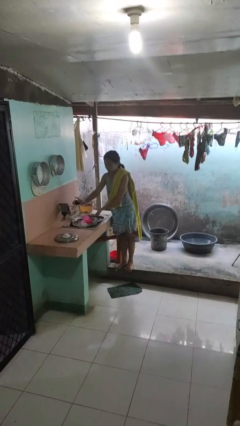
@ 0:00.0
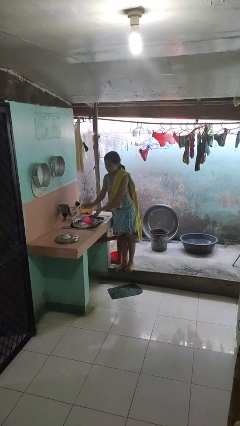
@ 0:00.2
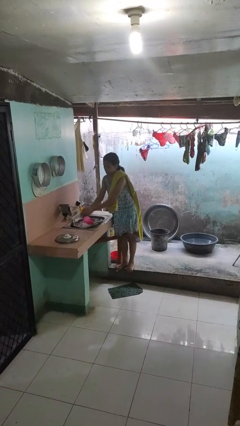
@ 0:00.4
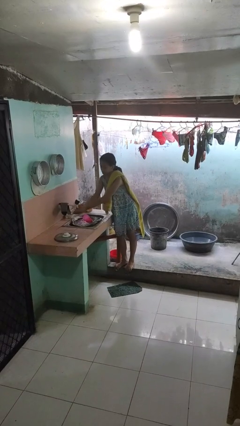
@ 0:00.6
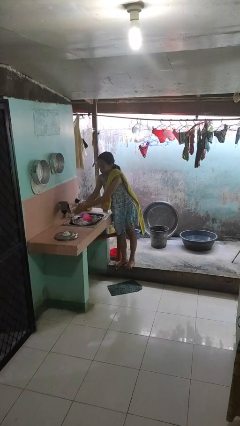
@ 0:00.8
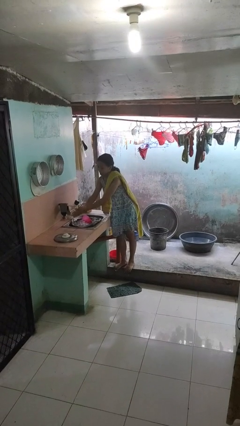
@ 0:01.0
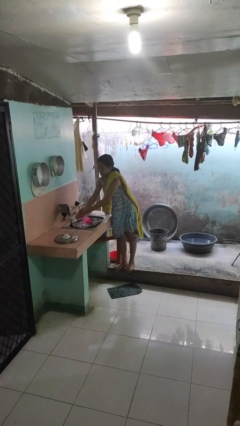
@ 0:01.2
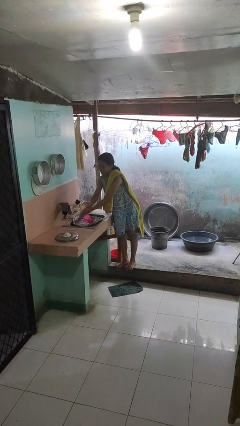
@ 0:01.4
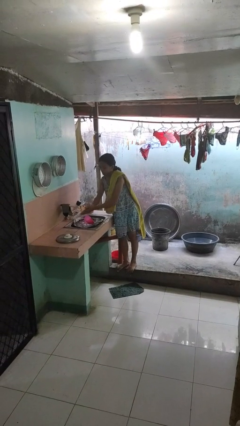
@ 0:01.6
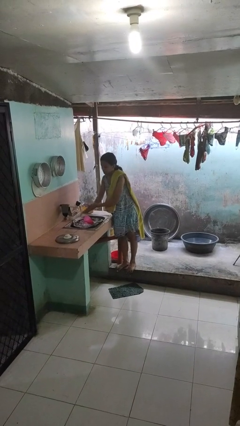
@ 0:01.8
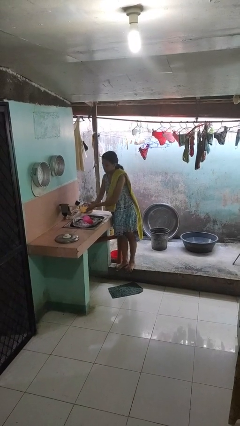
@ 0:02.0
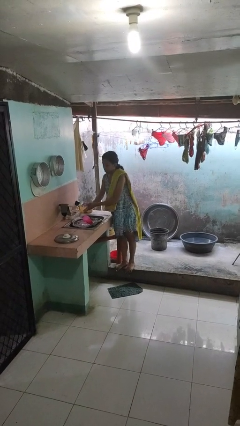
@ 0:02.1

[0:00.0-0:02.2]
person washes hands

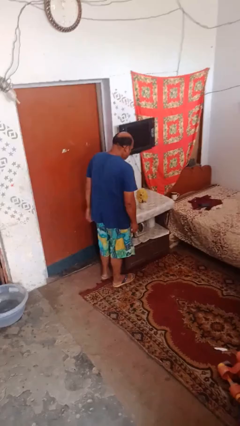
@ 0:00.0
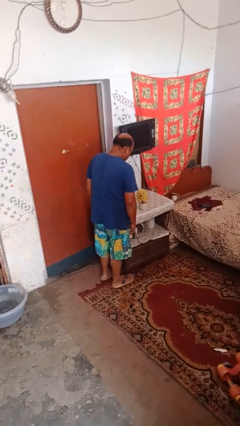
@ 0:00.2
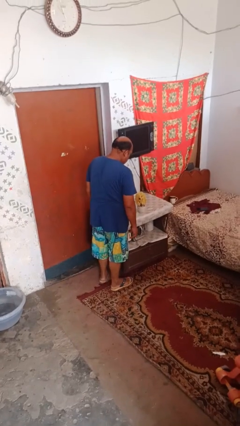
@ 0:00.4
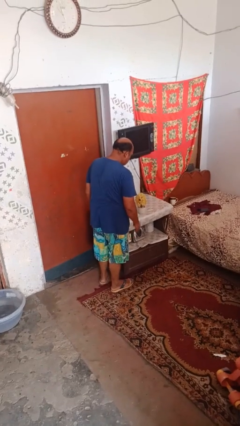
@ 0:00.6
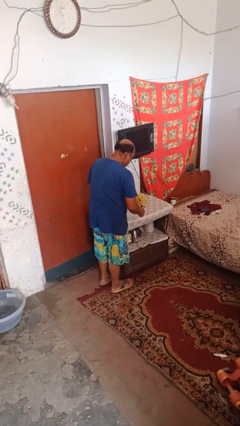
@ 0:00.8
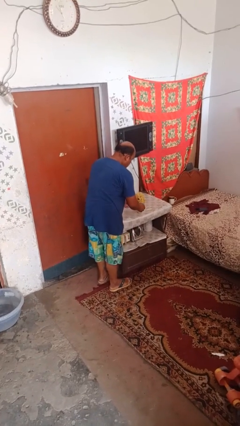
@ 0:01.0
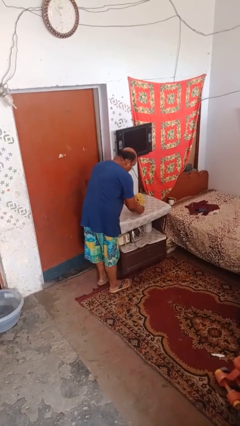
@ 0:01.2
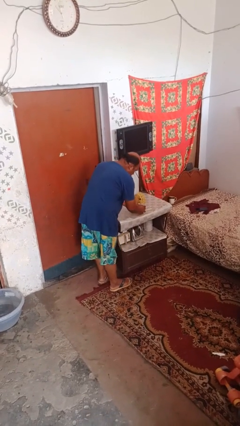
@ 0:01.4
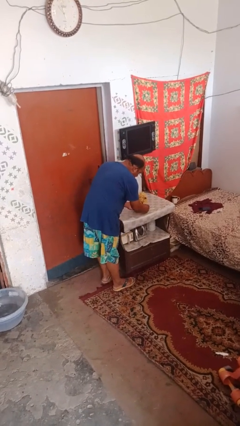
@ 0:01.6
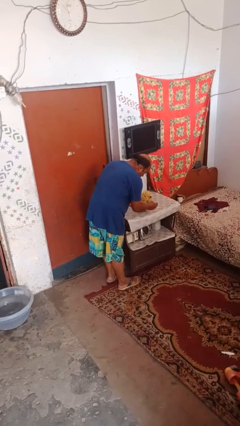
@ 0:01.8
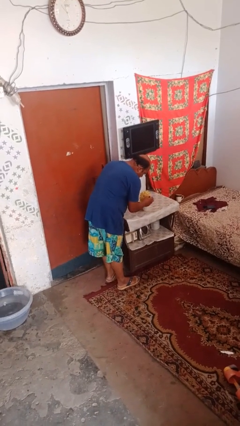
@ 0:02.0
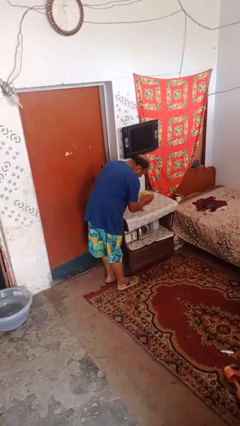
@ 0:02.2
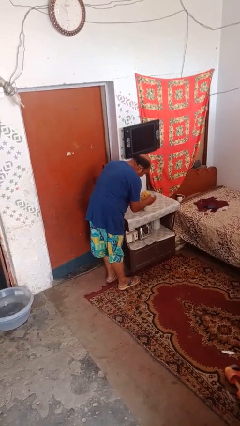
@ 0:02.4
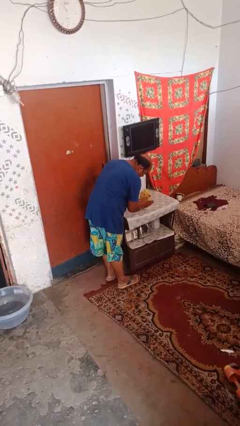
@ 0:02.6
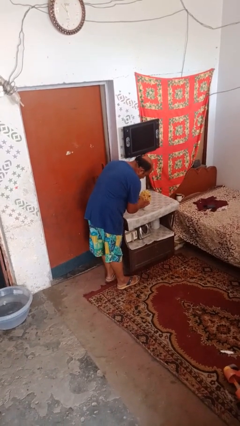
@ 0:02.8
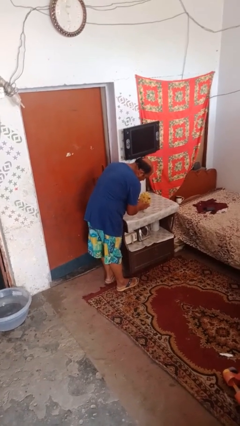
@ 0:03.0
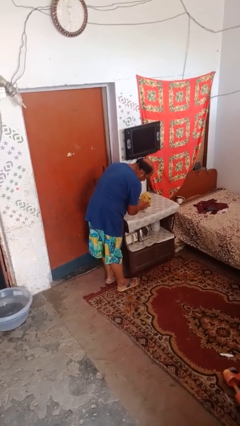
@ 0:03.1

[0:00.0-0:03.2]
person arranges flowers in vase

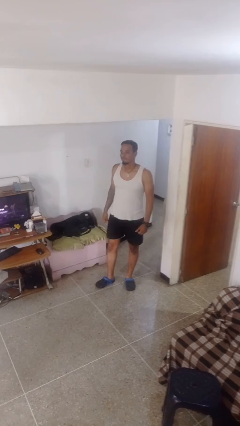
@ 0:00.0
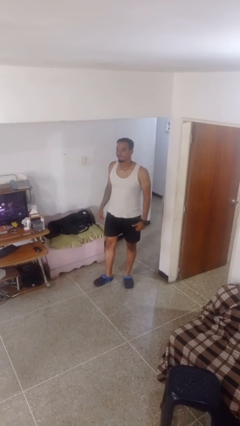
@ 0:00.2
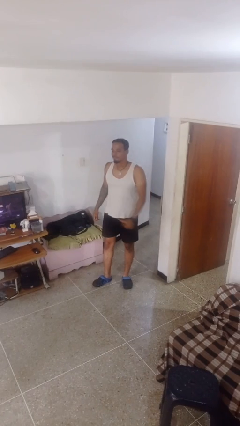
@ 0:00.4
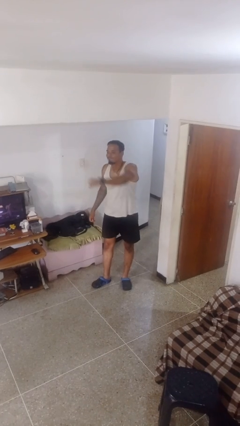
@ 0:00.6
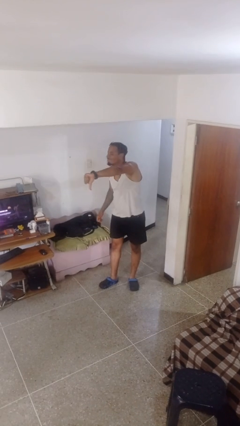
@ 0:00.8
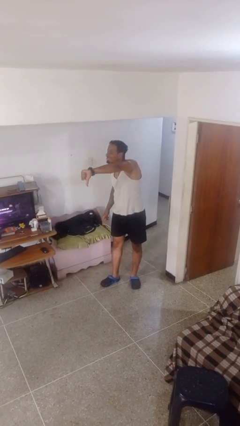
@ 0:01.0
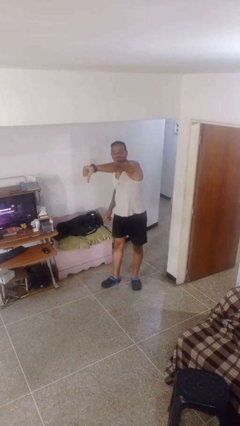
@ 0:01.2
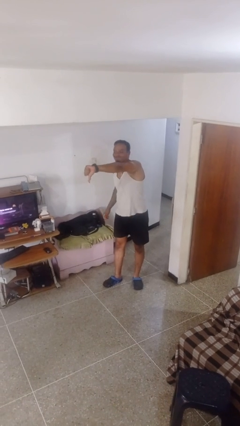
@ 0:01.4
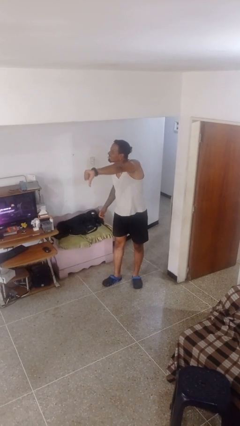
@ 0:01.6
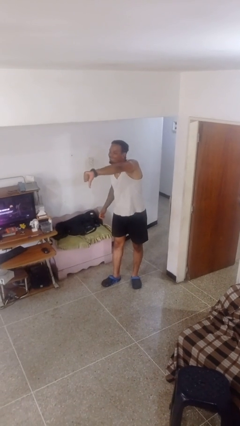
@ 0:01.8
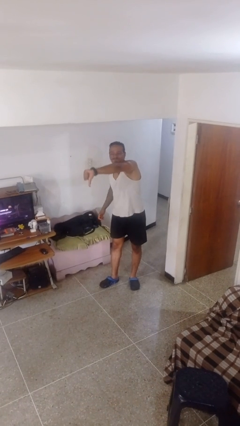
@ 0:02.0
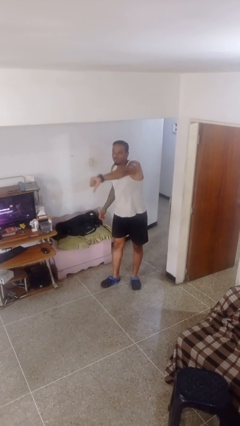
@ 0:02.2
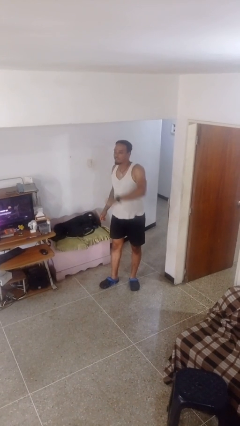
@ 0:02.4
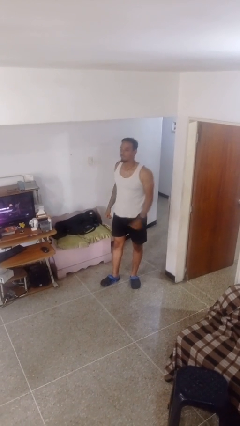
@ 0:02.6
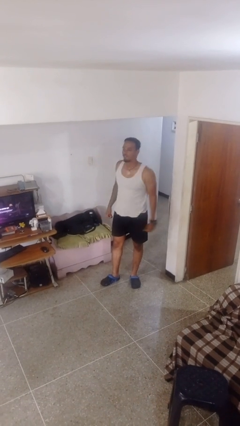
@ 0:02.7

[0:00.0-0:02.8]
person gestures thumbs down

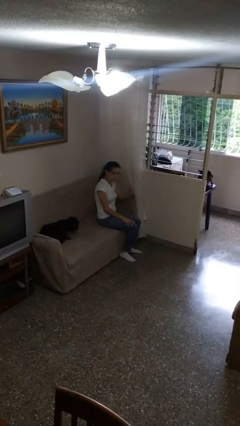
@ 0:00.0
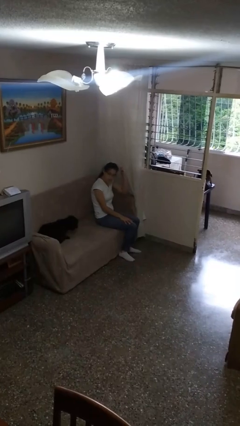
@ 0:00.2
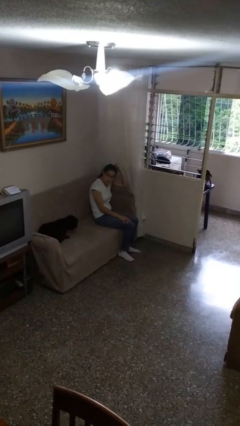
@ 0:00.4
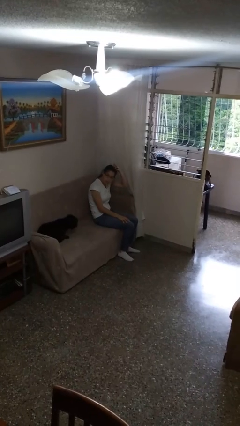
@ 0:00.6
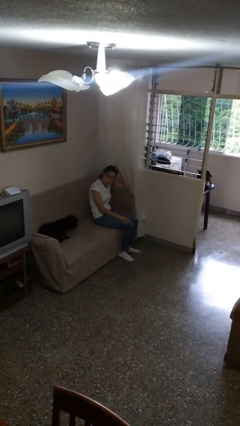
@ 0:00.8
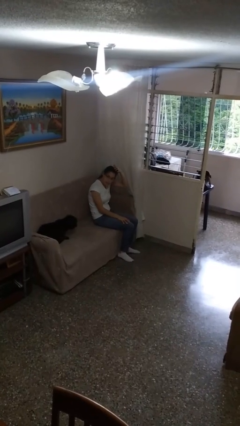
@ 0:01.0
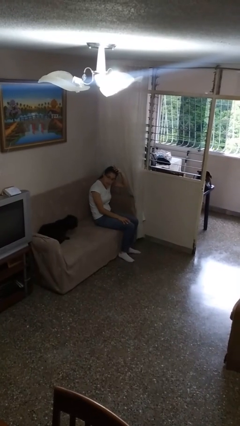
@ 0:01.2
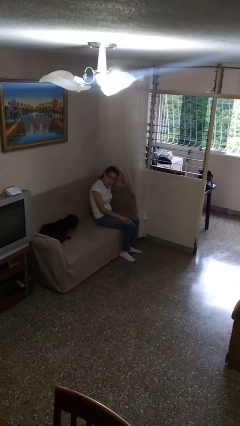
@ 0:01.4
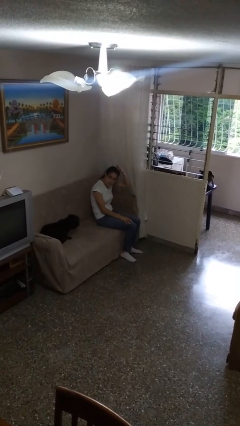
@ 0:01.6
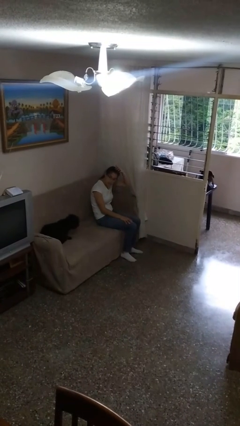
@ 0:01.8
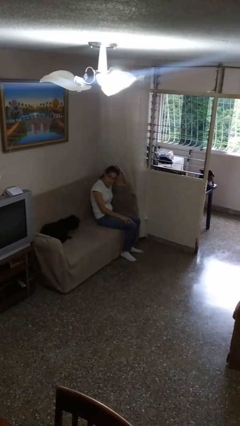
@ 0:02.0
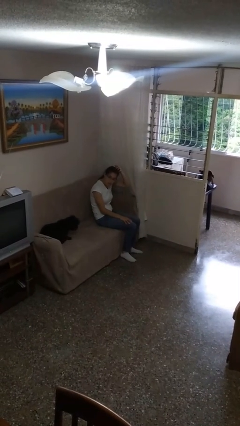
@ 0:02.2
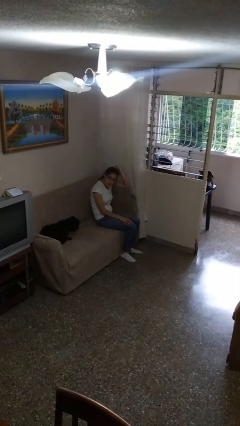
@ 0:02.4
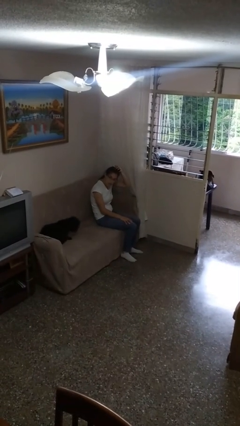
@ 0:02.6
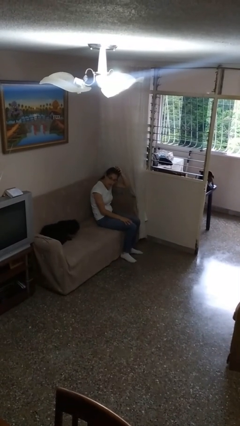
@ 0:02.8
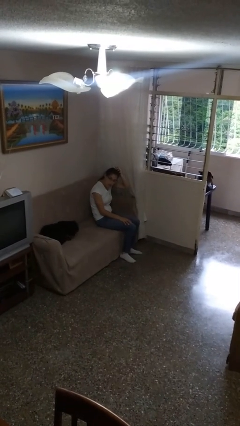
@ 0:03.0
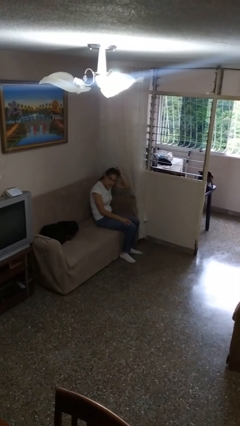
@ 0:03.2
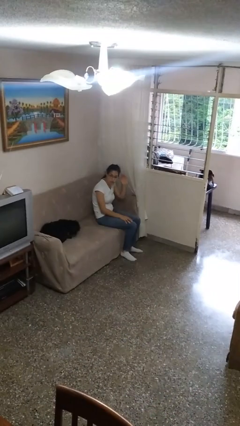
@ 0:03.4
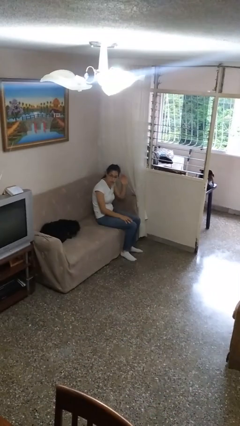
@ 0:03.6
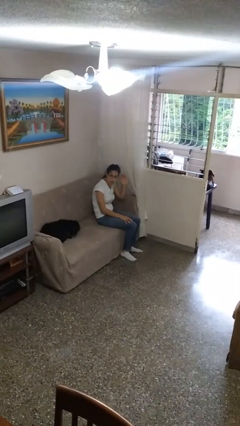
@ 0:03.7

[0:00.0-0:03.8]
person scratches face

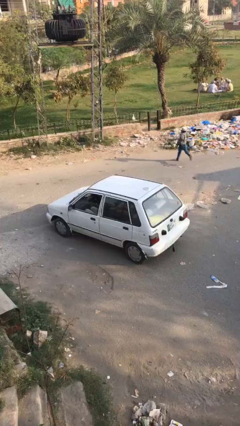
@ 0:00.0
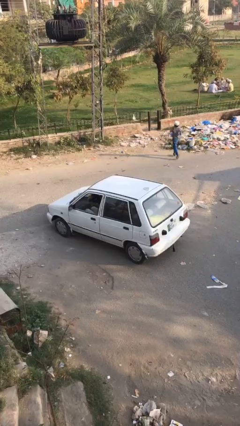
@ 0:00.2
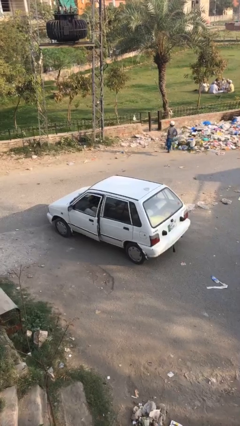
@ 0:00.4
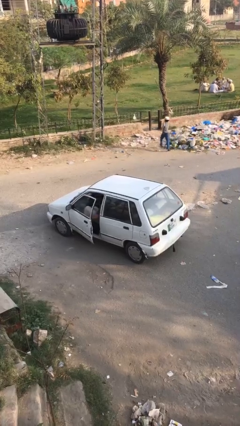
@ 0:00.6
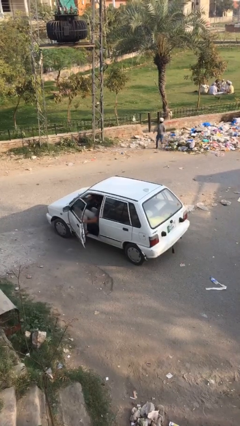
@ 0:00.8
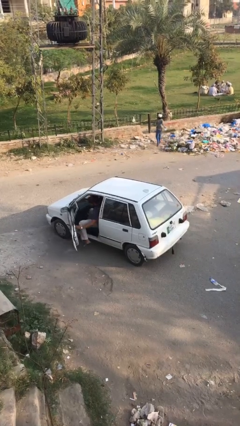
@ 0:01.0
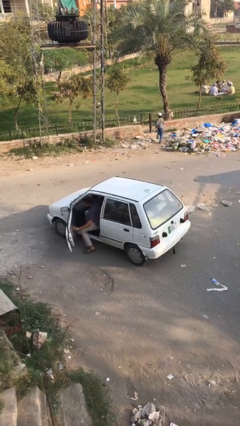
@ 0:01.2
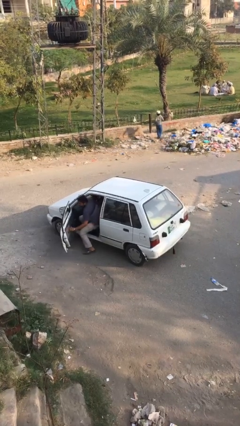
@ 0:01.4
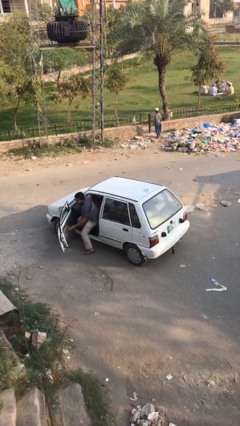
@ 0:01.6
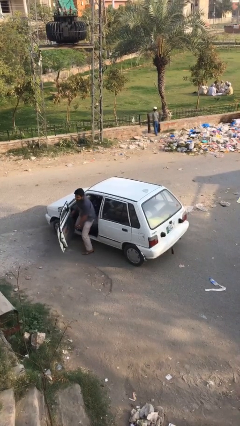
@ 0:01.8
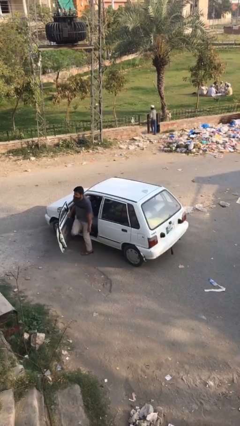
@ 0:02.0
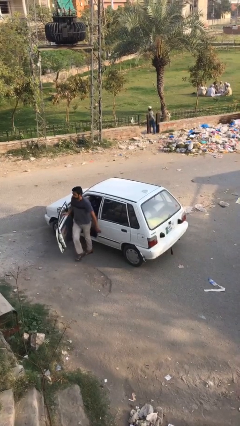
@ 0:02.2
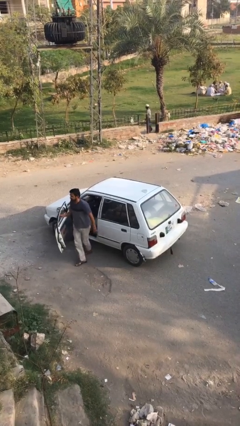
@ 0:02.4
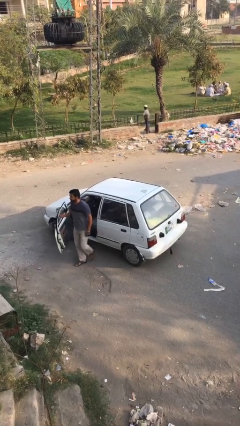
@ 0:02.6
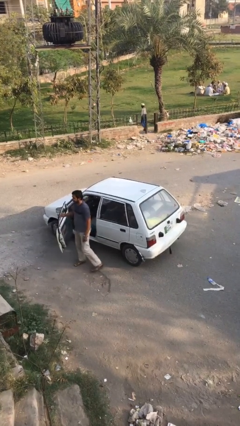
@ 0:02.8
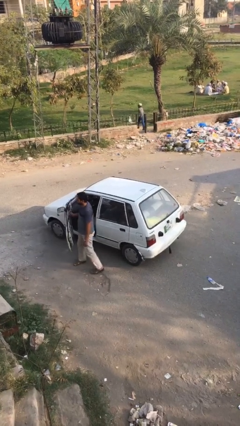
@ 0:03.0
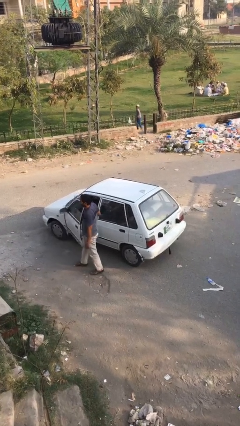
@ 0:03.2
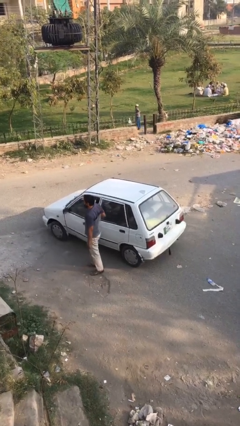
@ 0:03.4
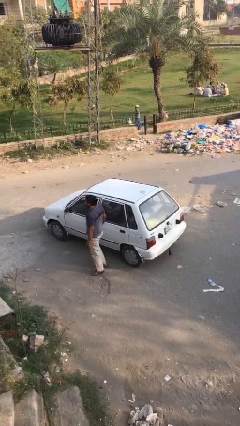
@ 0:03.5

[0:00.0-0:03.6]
car drops off person

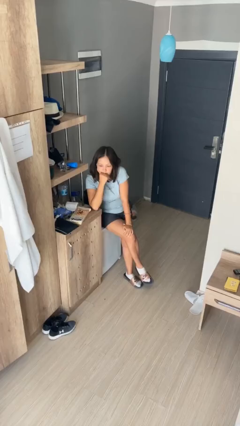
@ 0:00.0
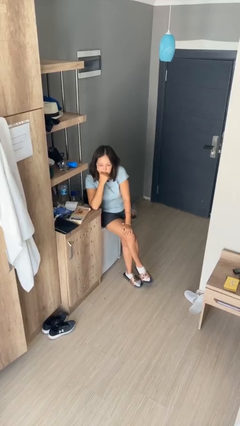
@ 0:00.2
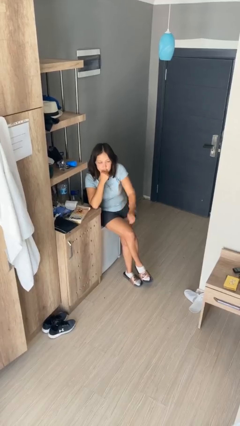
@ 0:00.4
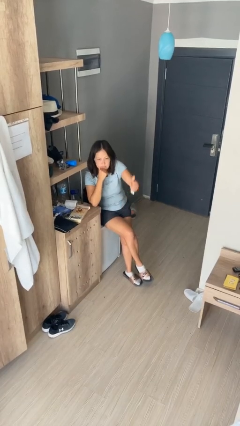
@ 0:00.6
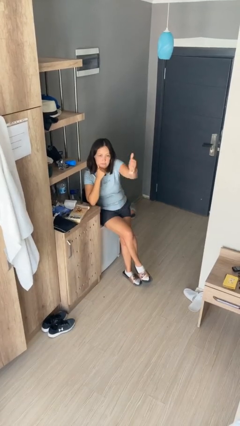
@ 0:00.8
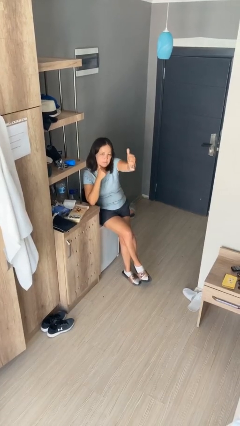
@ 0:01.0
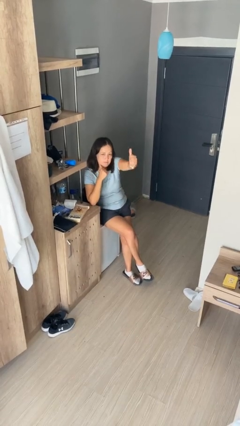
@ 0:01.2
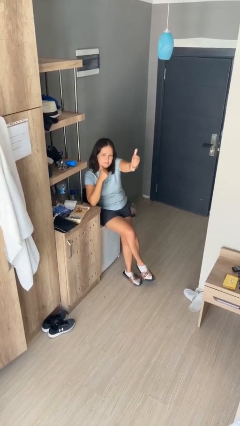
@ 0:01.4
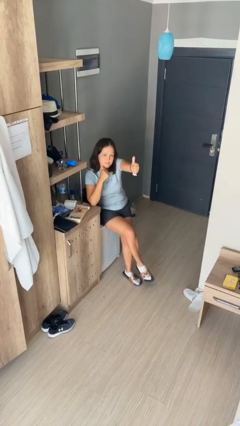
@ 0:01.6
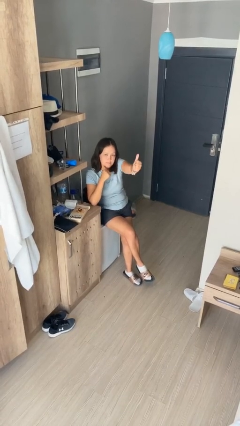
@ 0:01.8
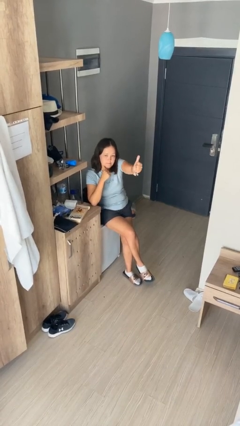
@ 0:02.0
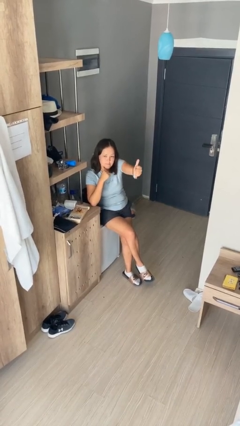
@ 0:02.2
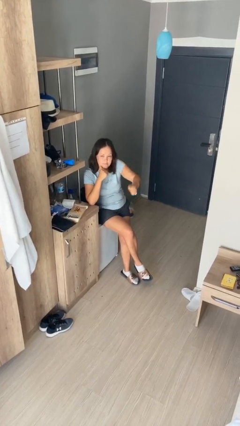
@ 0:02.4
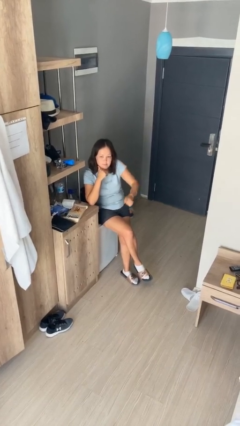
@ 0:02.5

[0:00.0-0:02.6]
person gestures thumbs up
